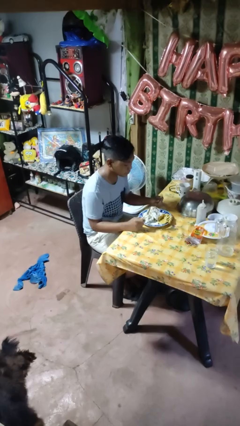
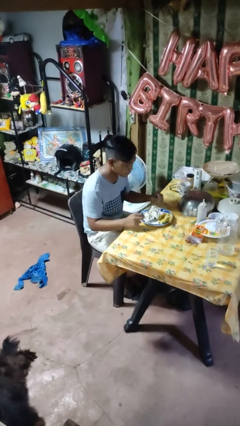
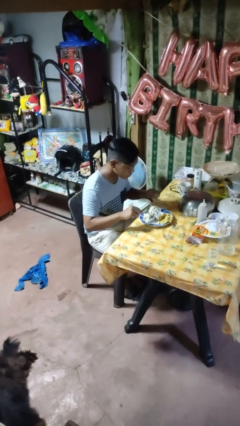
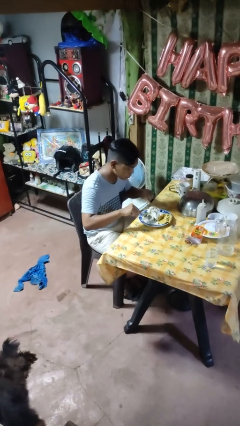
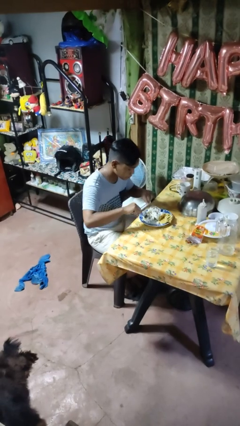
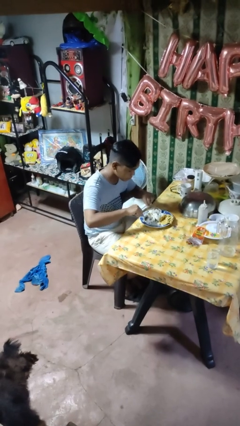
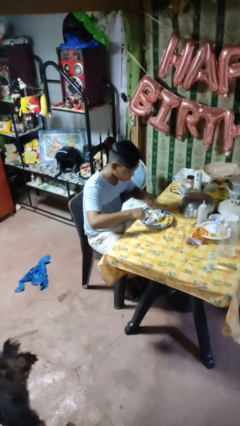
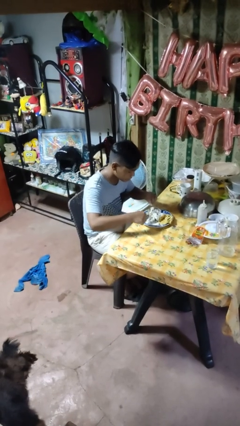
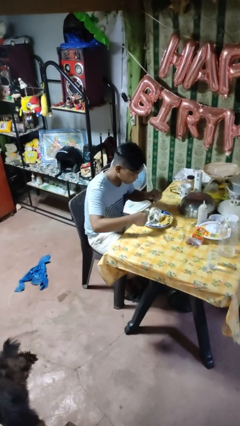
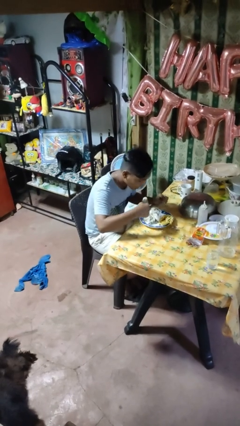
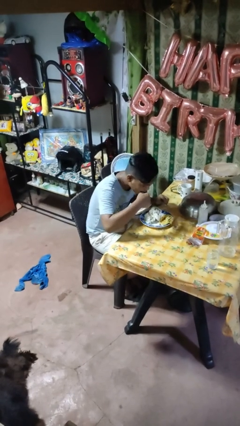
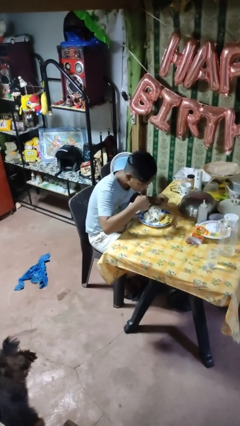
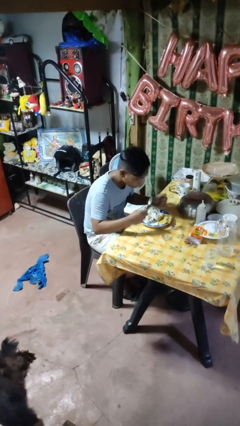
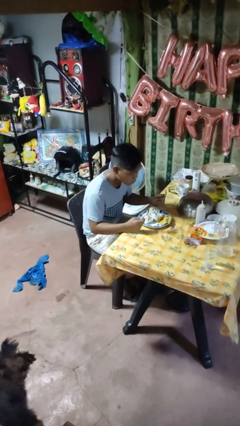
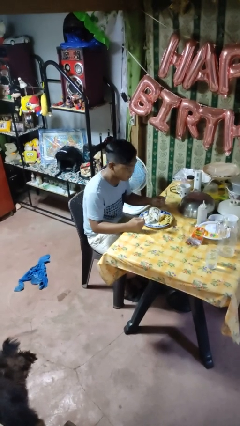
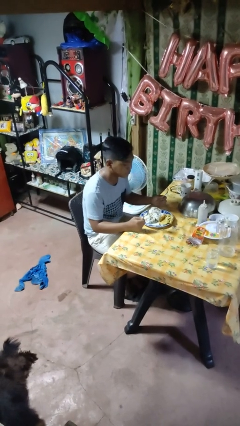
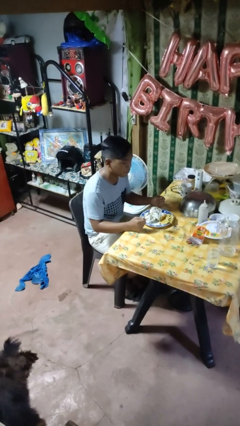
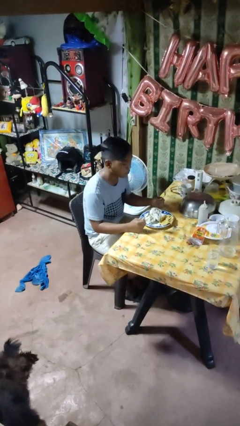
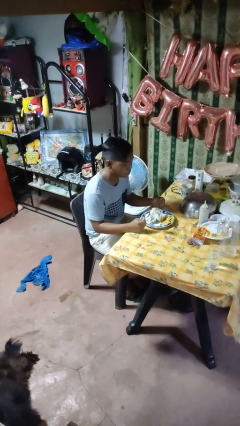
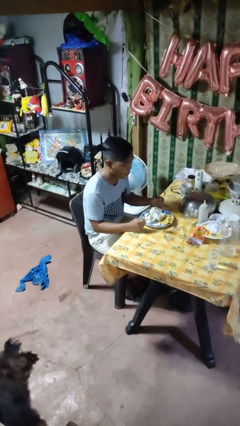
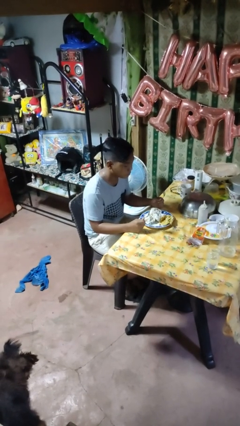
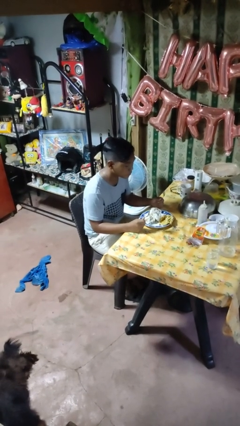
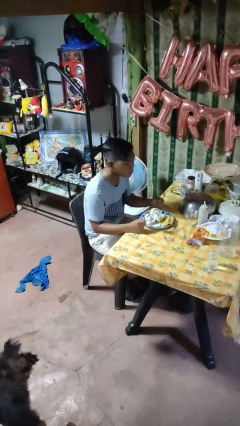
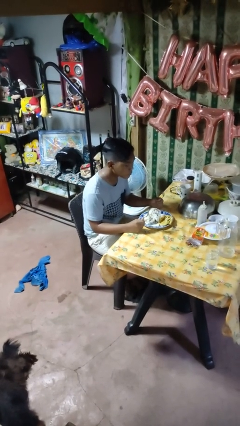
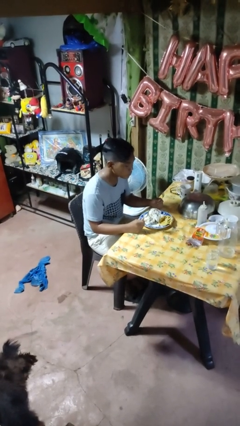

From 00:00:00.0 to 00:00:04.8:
person eats with utensil

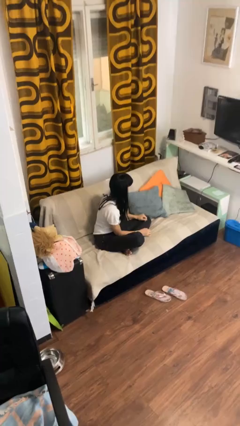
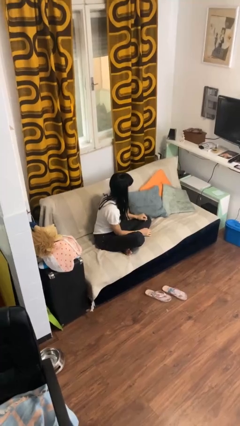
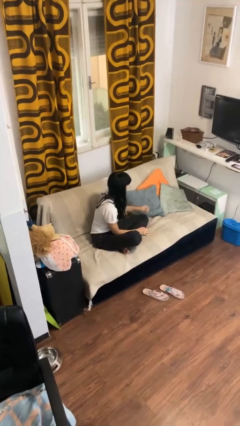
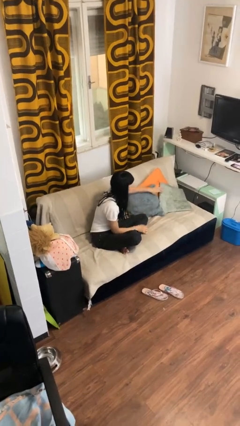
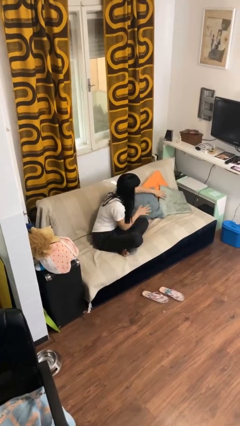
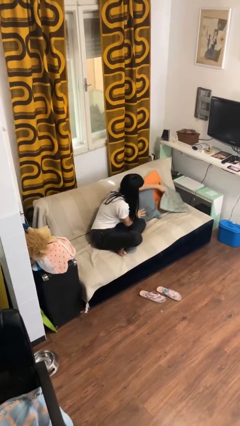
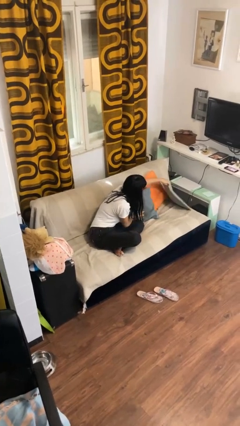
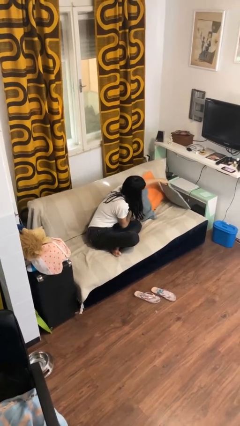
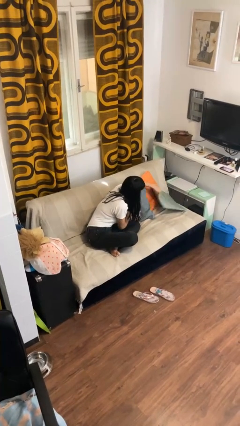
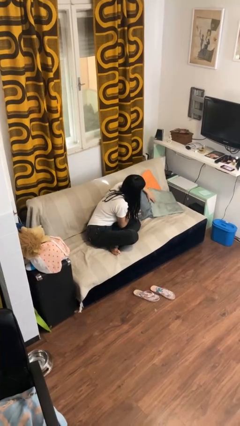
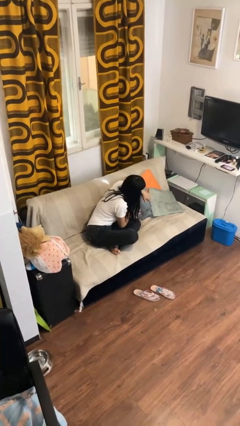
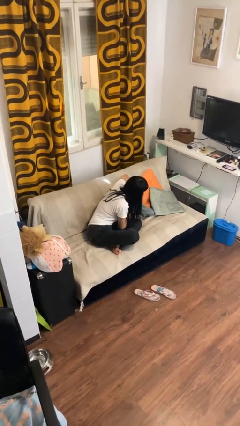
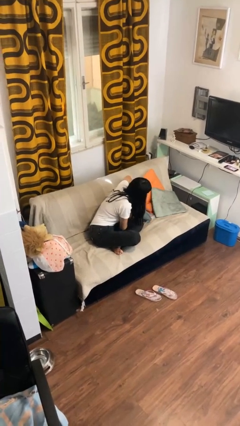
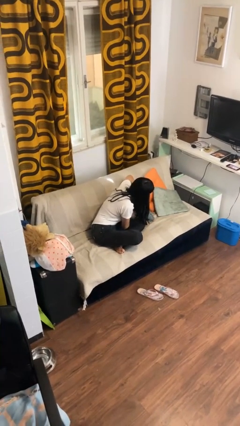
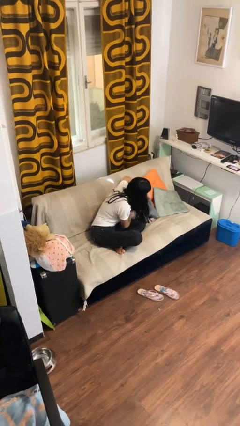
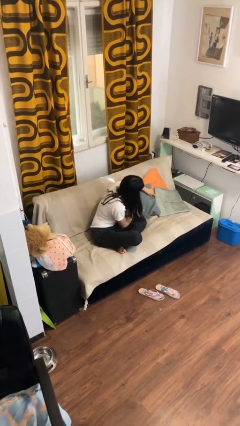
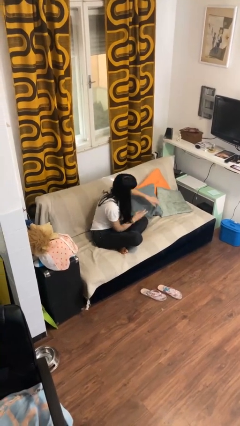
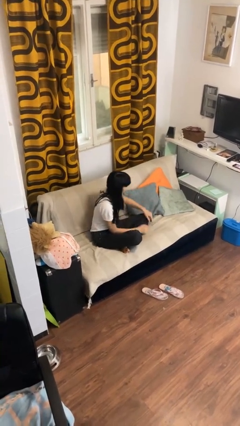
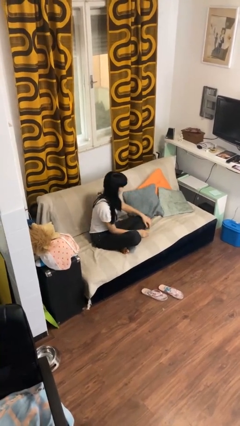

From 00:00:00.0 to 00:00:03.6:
person searches in couch

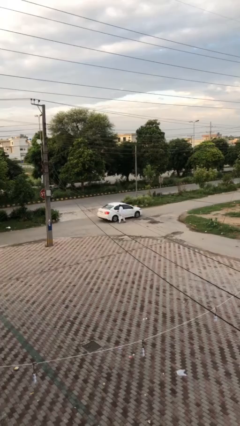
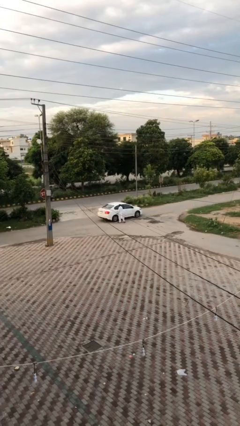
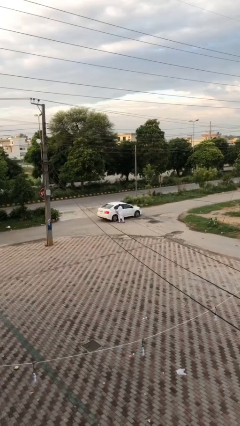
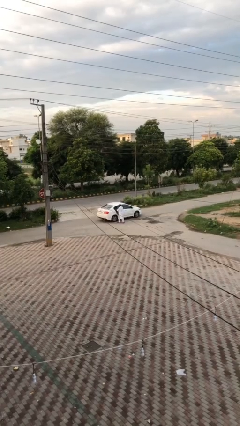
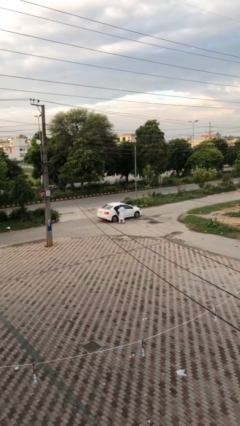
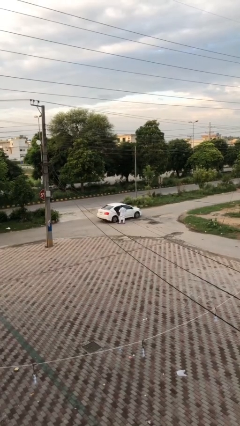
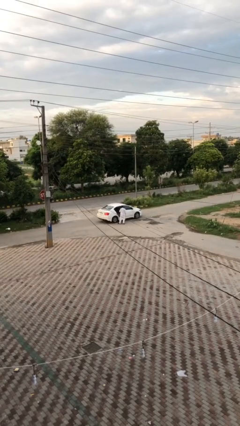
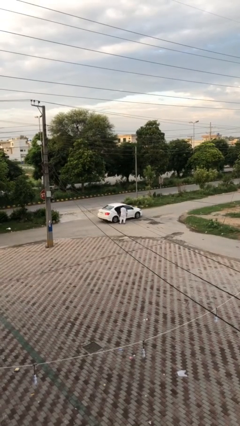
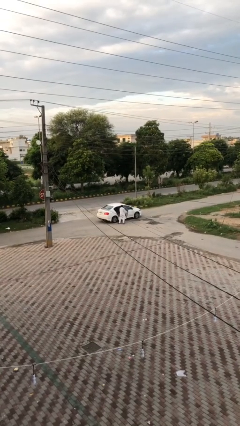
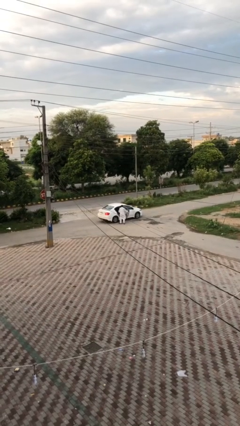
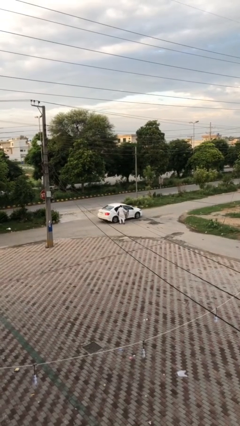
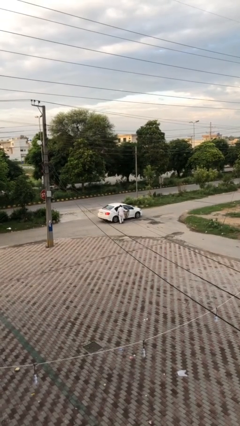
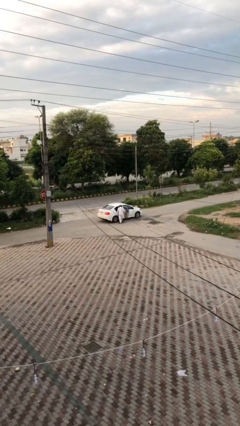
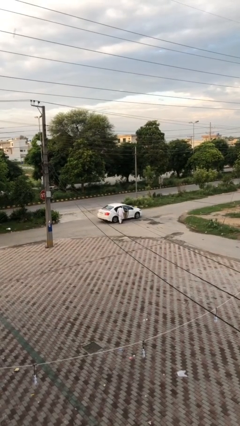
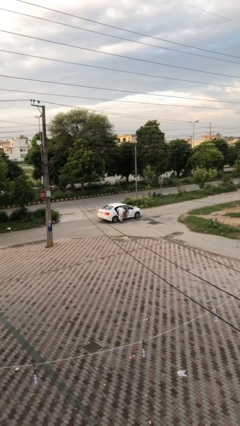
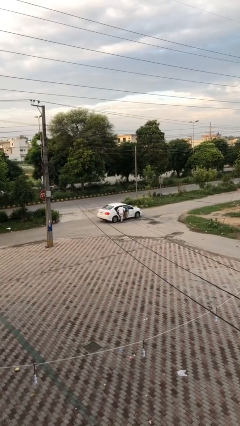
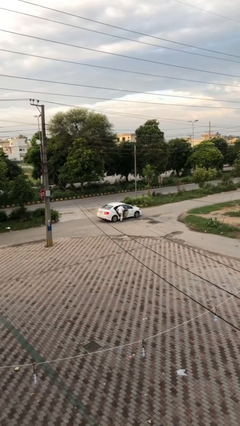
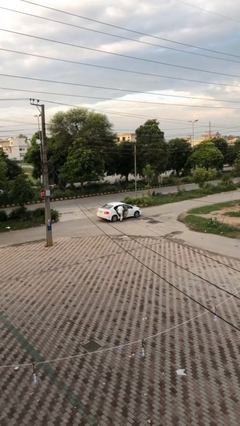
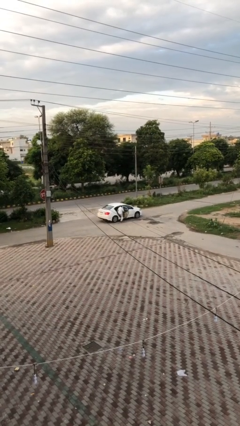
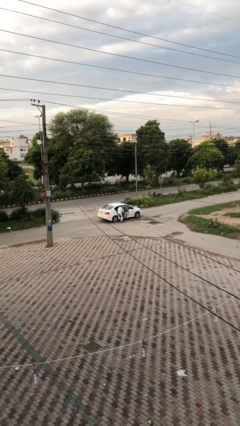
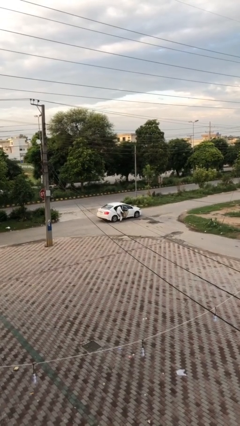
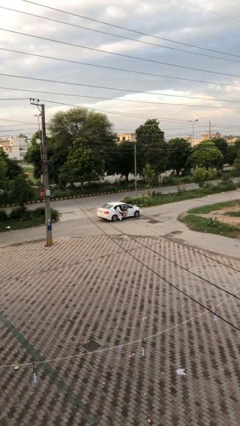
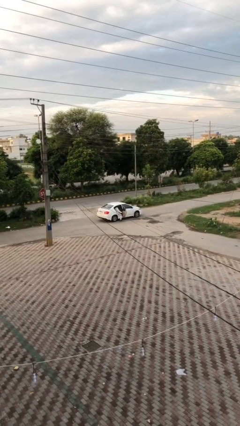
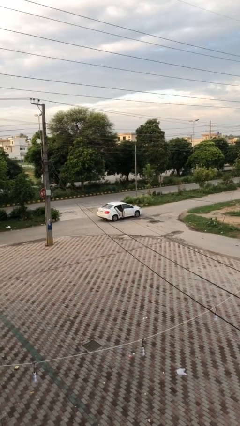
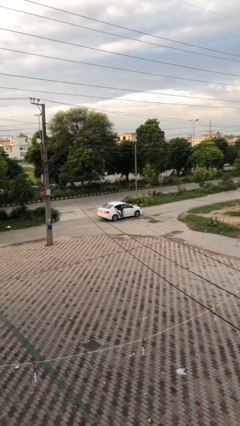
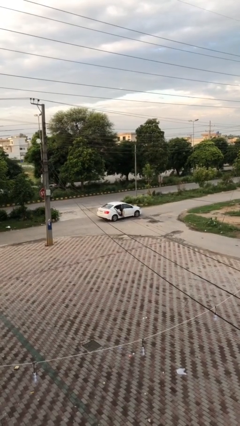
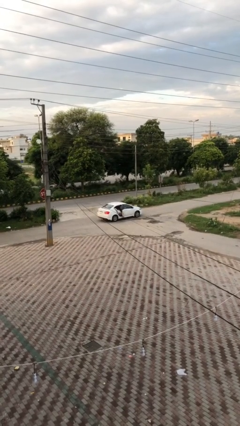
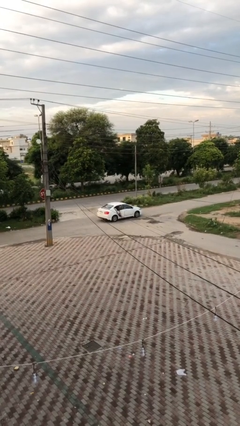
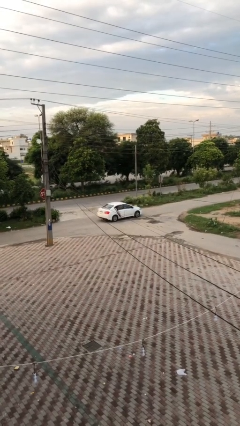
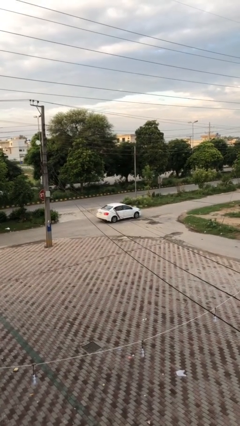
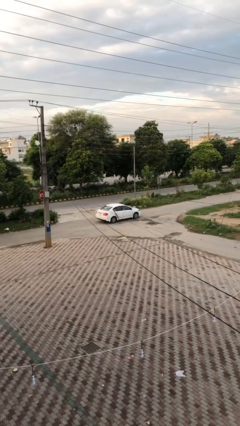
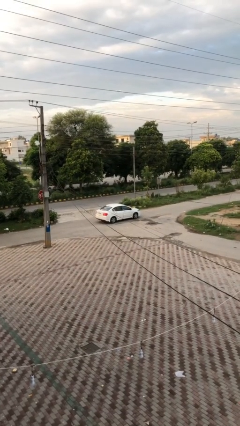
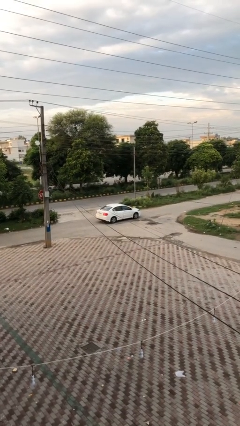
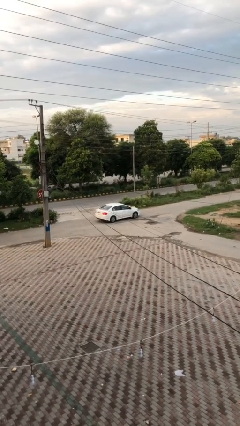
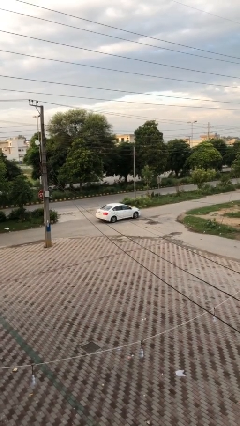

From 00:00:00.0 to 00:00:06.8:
car picks up person

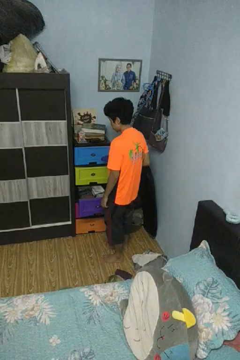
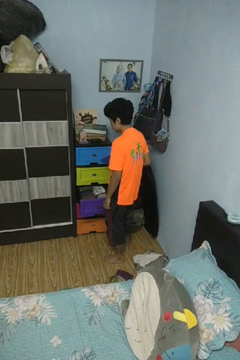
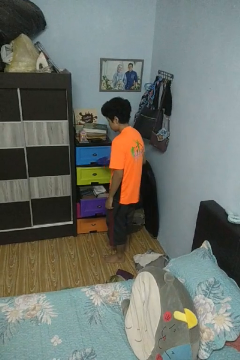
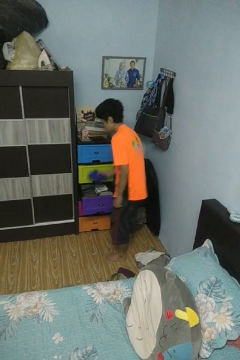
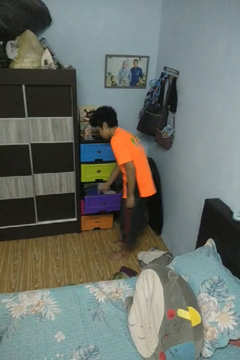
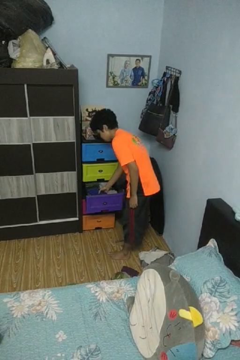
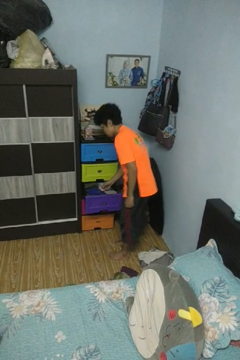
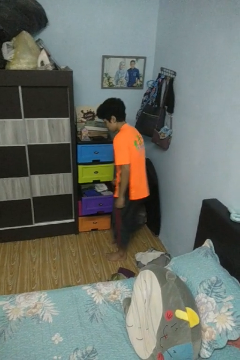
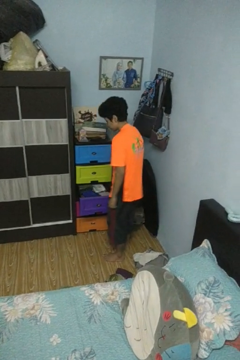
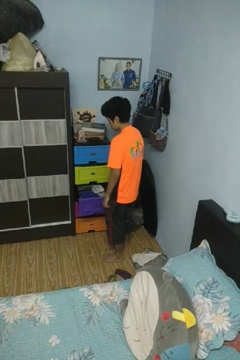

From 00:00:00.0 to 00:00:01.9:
person puts clothes into dresser

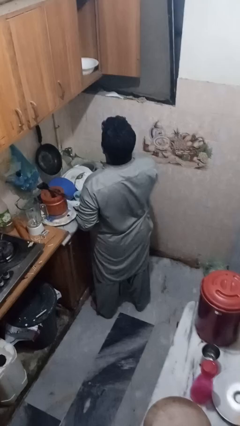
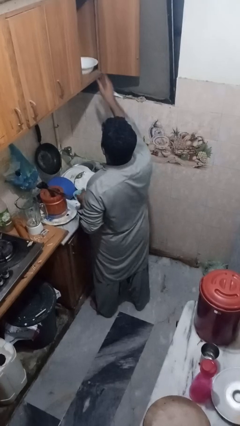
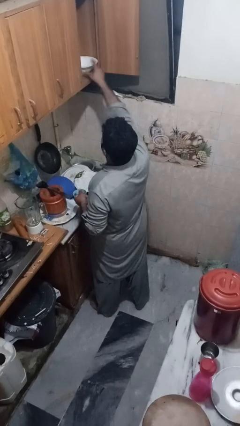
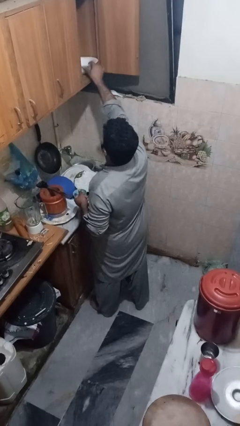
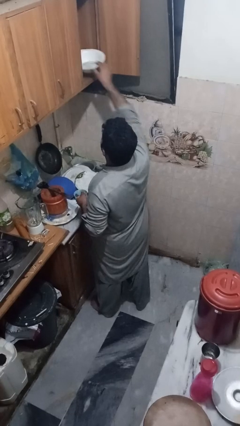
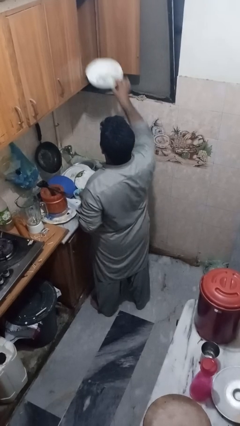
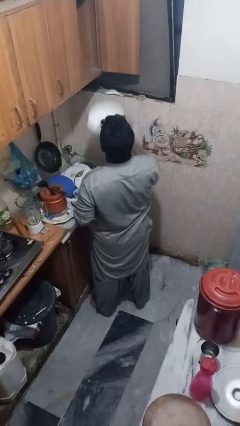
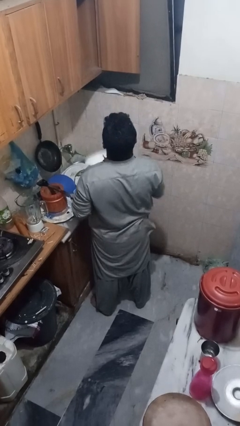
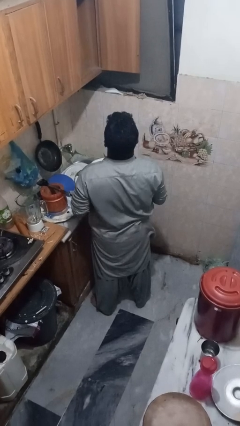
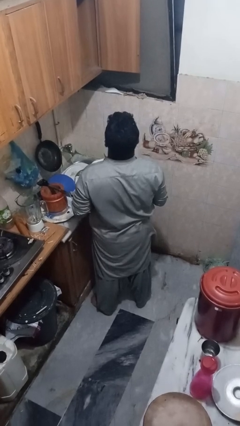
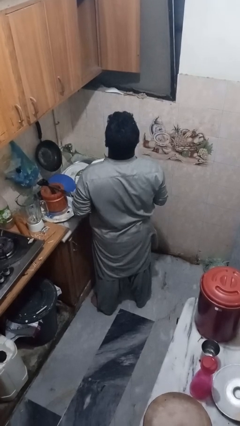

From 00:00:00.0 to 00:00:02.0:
person takes object from cabinet
